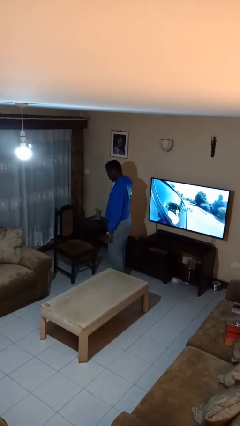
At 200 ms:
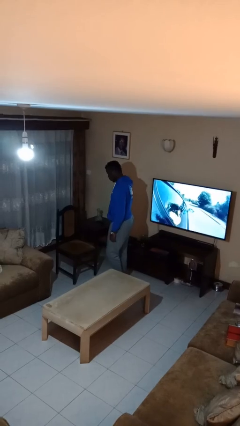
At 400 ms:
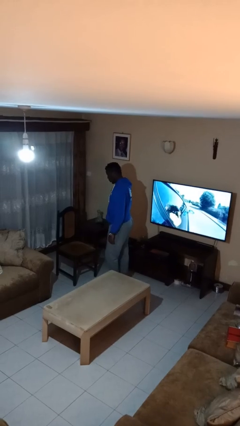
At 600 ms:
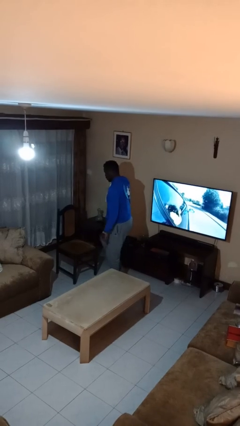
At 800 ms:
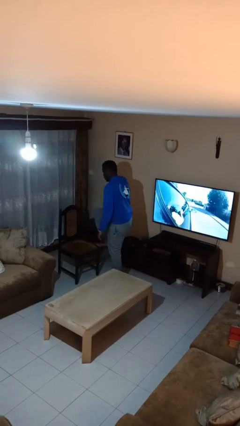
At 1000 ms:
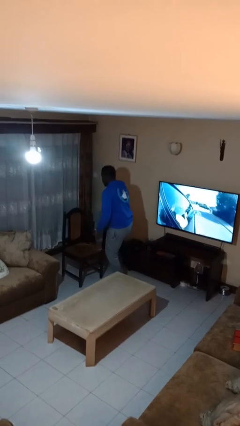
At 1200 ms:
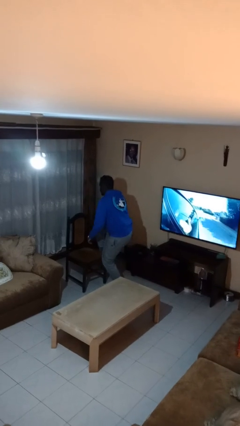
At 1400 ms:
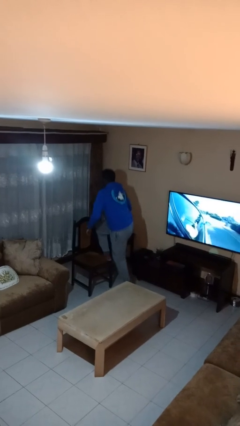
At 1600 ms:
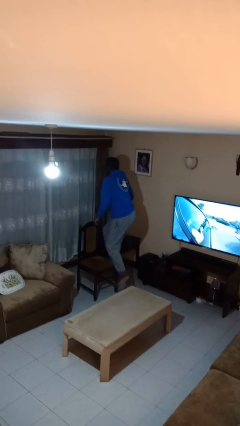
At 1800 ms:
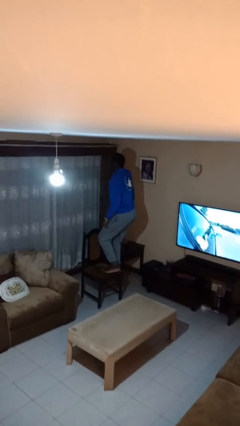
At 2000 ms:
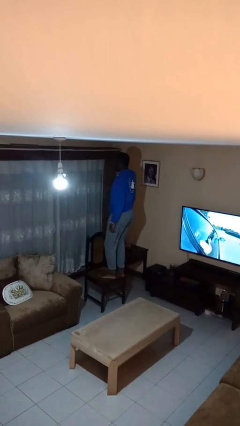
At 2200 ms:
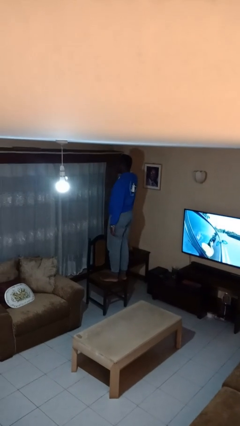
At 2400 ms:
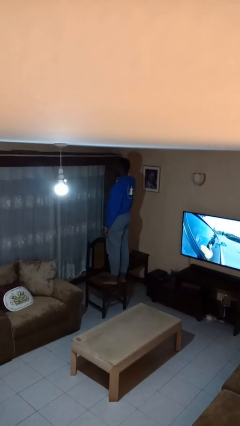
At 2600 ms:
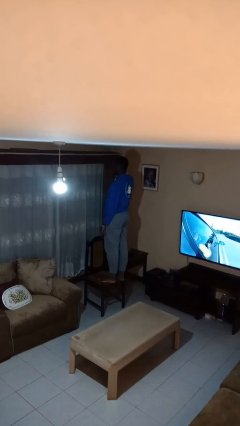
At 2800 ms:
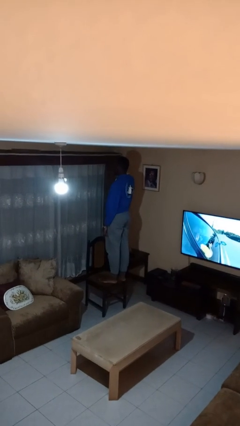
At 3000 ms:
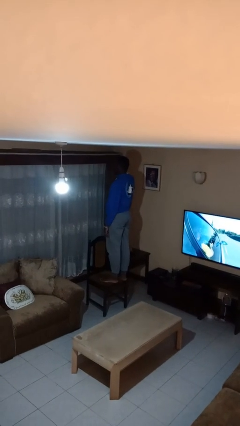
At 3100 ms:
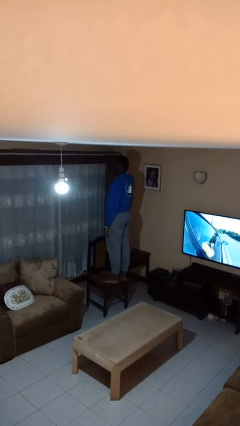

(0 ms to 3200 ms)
person climbs on chair

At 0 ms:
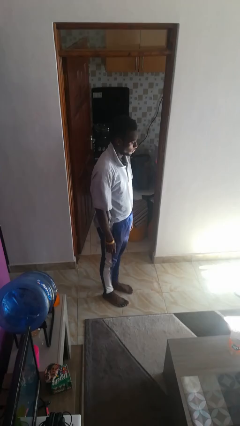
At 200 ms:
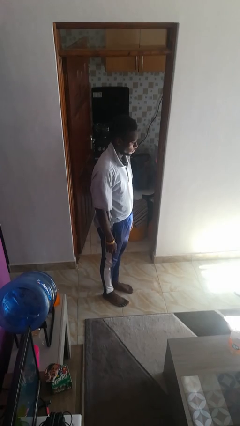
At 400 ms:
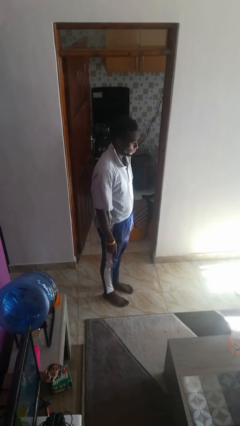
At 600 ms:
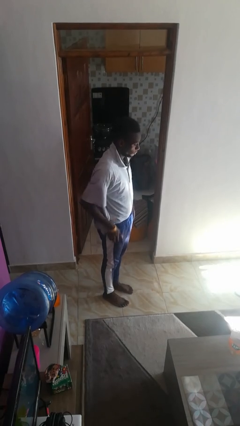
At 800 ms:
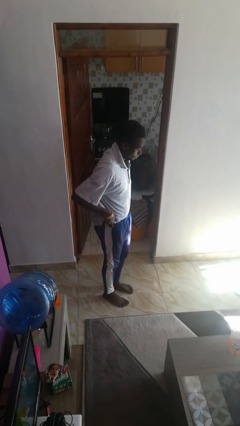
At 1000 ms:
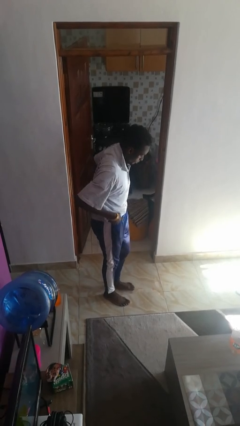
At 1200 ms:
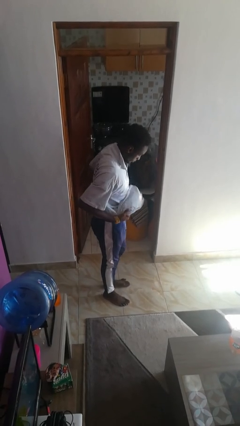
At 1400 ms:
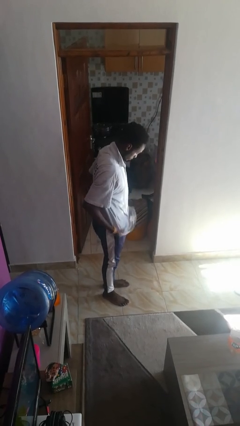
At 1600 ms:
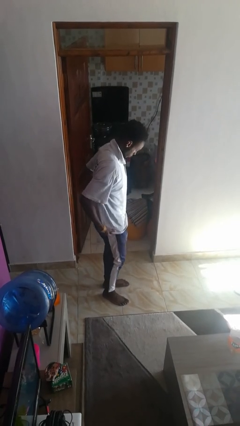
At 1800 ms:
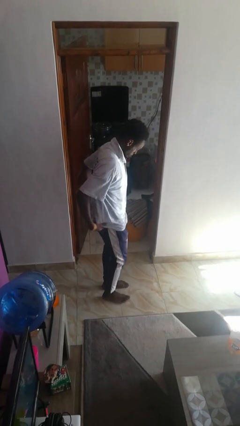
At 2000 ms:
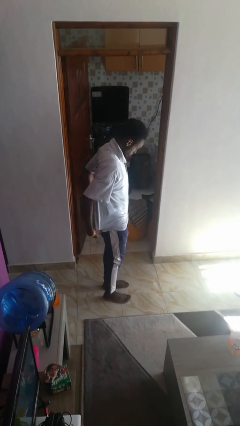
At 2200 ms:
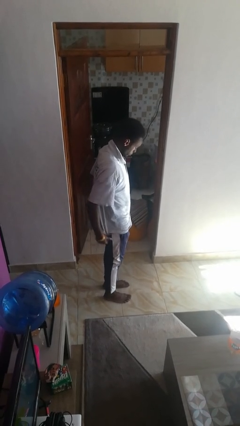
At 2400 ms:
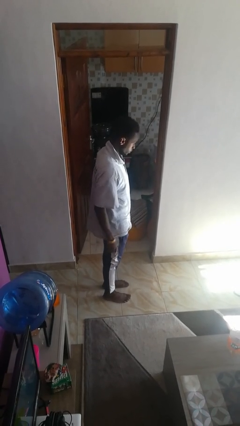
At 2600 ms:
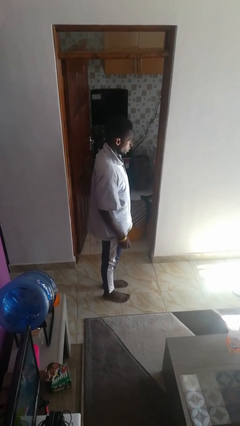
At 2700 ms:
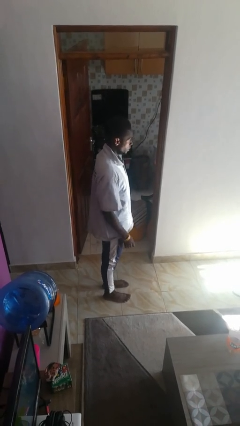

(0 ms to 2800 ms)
person untucks shirt

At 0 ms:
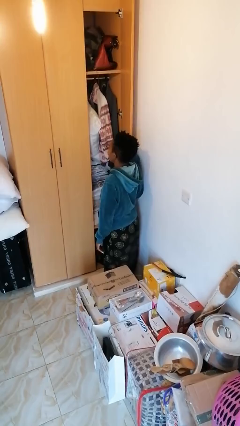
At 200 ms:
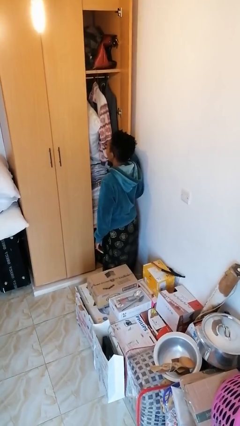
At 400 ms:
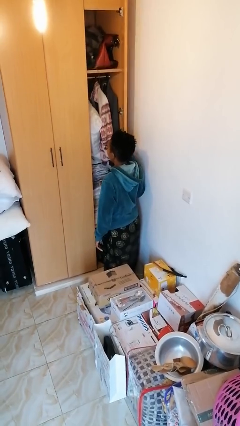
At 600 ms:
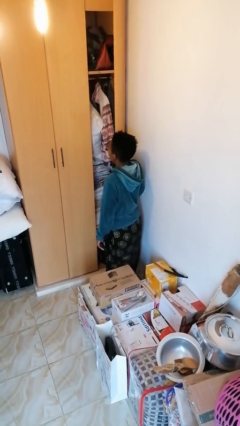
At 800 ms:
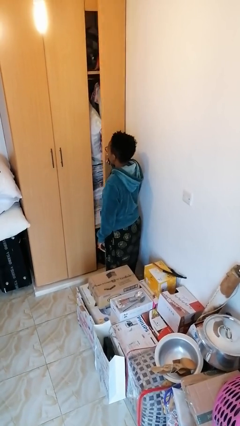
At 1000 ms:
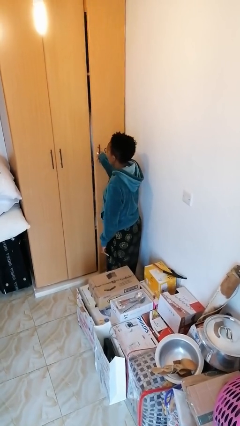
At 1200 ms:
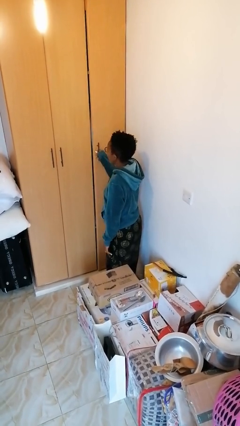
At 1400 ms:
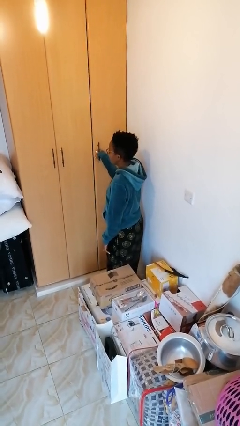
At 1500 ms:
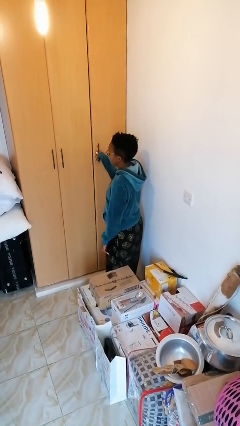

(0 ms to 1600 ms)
person closes closet door

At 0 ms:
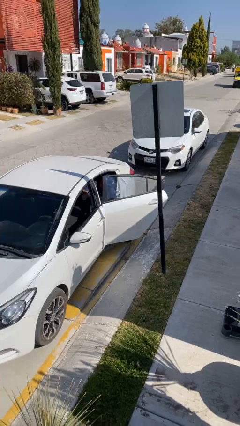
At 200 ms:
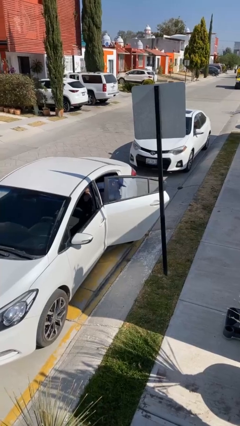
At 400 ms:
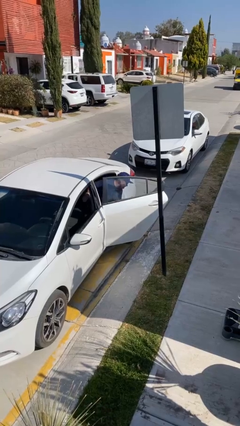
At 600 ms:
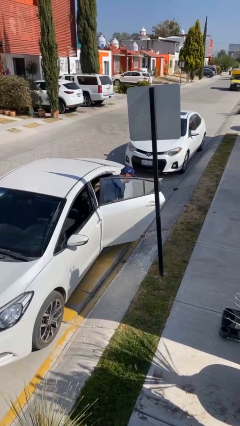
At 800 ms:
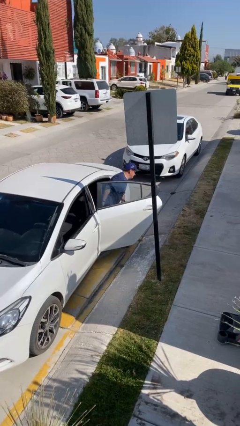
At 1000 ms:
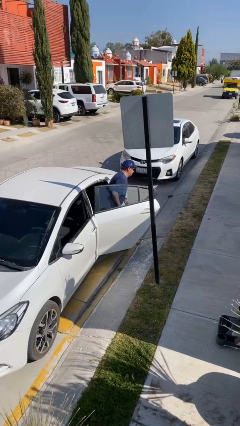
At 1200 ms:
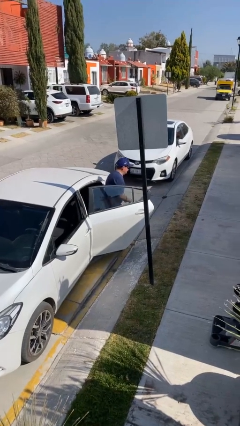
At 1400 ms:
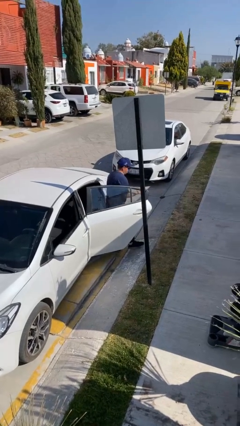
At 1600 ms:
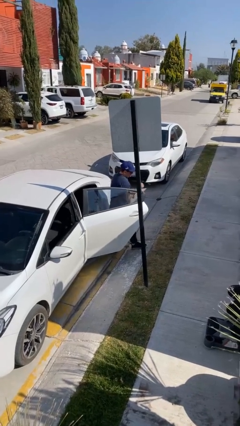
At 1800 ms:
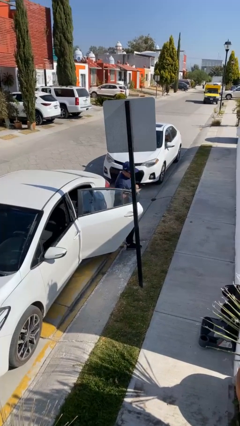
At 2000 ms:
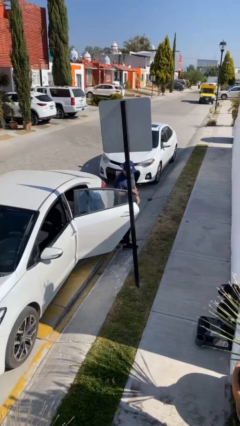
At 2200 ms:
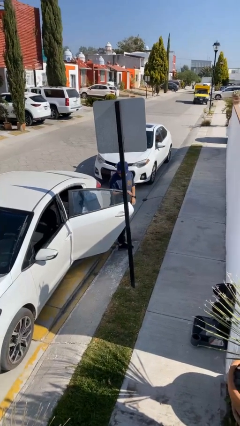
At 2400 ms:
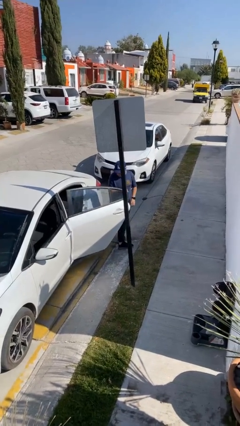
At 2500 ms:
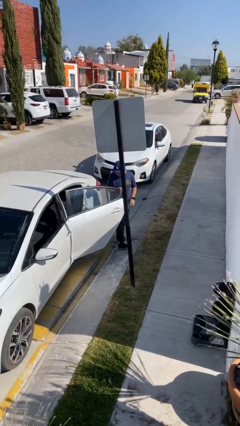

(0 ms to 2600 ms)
person exits car

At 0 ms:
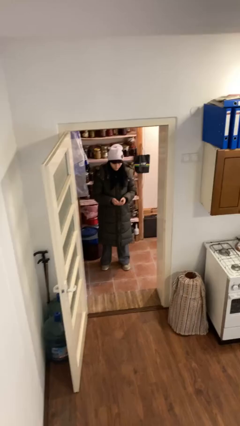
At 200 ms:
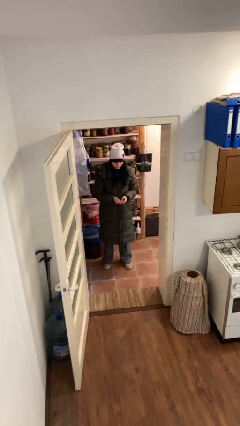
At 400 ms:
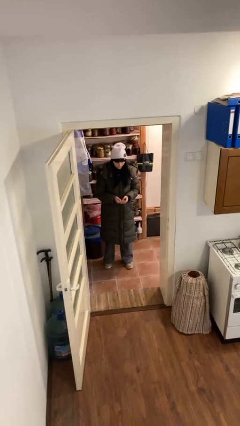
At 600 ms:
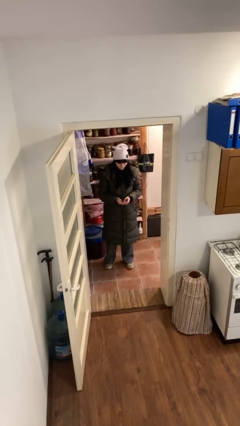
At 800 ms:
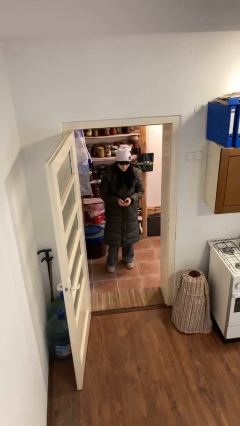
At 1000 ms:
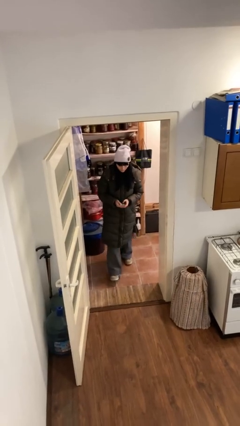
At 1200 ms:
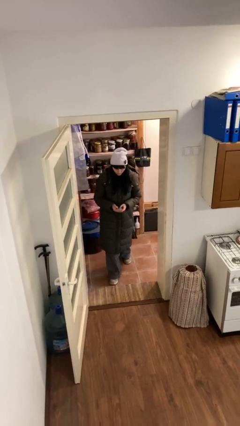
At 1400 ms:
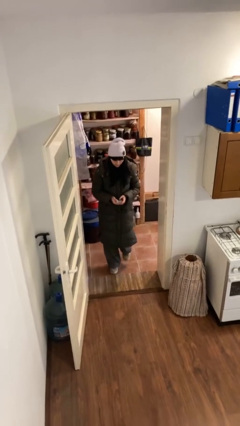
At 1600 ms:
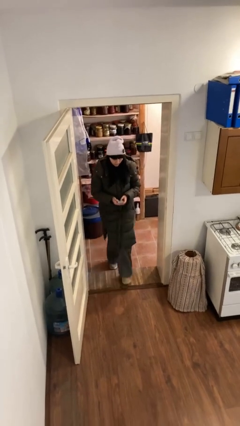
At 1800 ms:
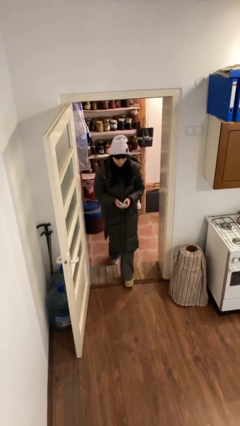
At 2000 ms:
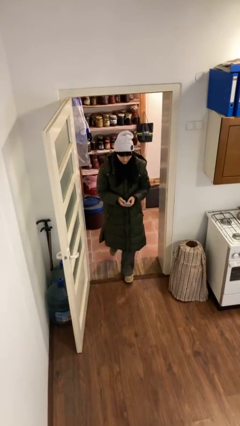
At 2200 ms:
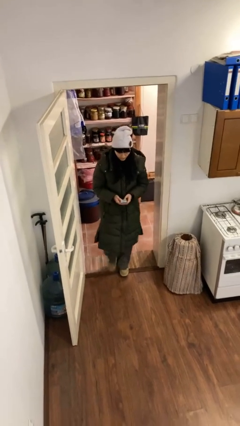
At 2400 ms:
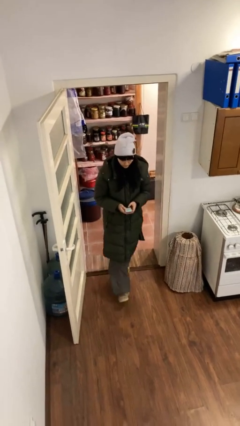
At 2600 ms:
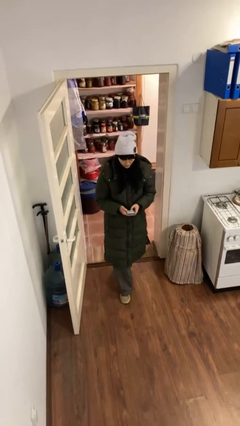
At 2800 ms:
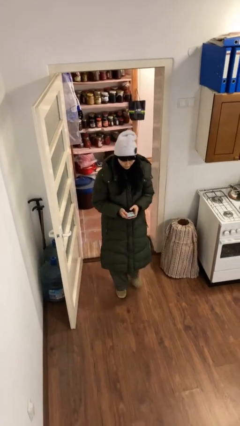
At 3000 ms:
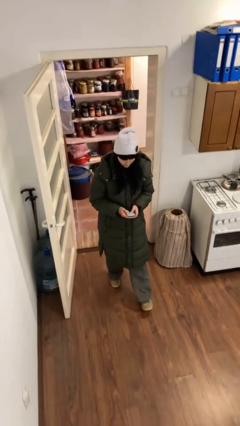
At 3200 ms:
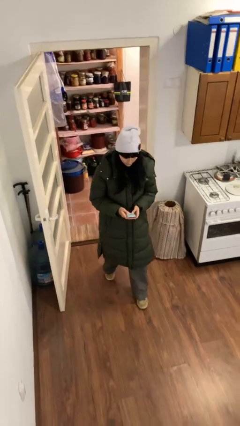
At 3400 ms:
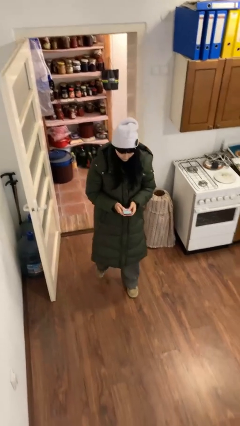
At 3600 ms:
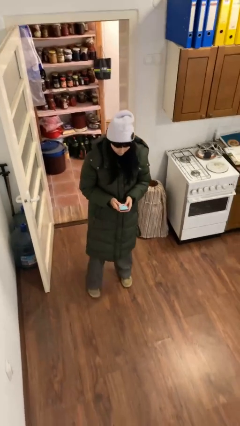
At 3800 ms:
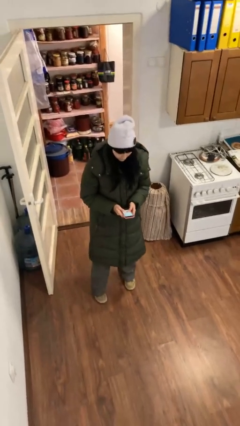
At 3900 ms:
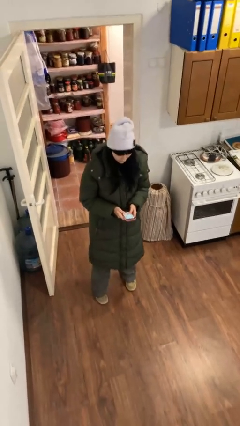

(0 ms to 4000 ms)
person enters scene through structure

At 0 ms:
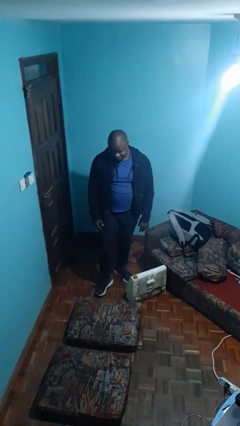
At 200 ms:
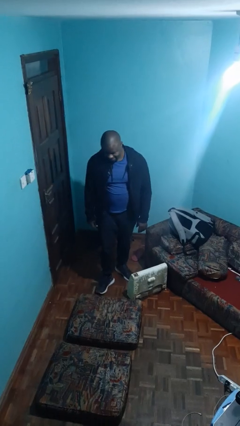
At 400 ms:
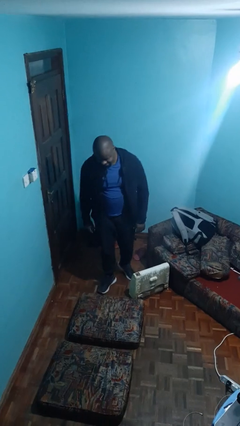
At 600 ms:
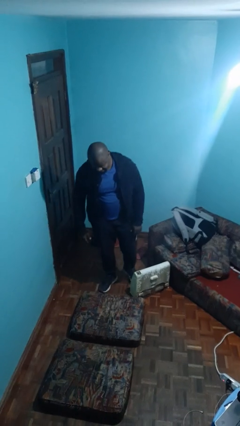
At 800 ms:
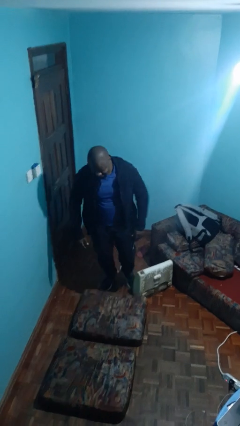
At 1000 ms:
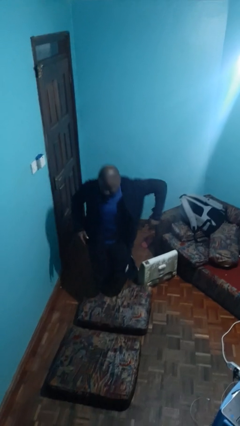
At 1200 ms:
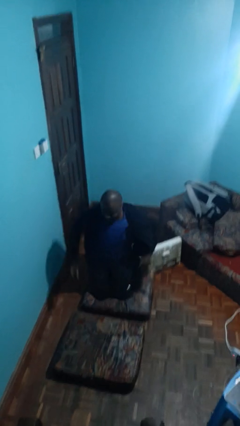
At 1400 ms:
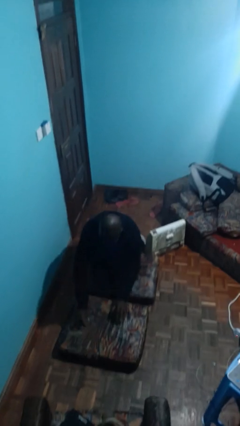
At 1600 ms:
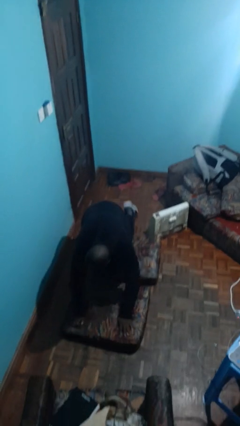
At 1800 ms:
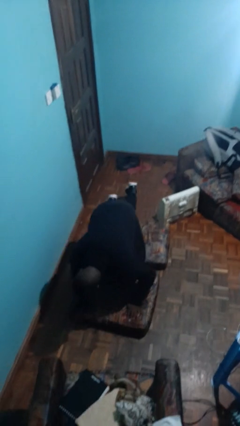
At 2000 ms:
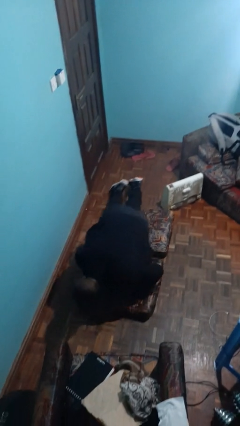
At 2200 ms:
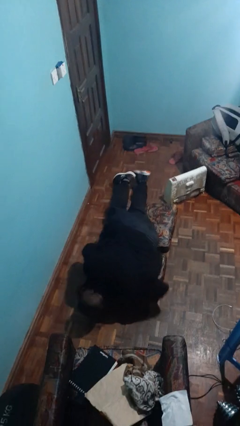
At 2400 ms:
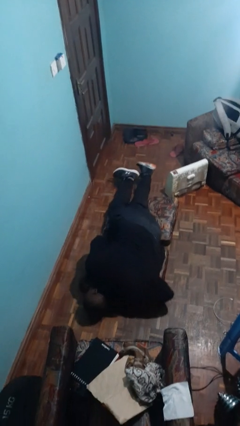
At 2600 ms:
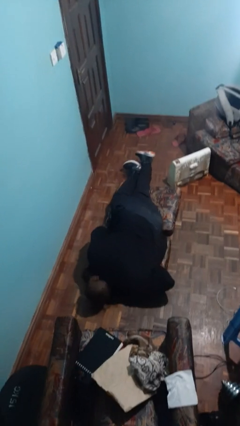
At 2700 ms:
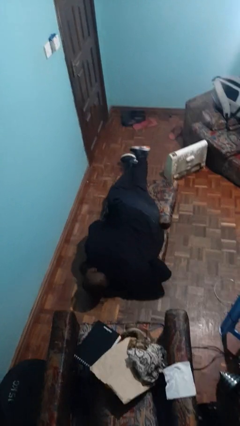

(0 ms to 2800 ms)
person trips on object on floor

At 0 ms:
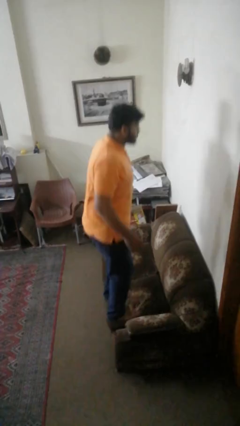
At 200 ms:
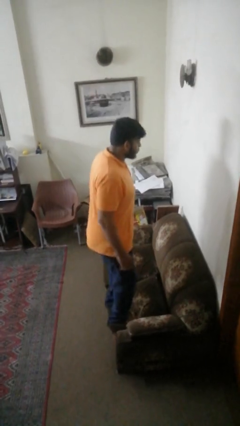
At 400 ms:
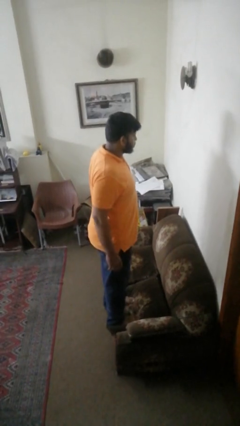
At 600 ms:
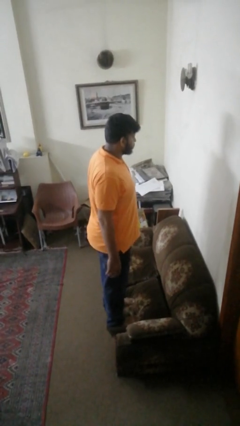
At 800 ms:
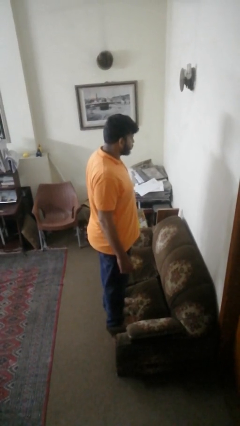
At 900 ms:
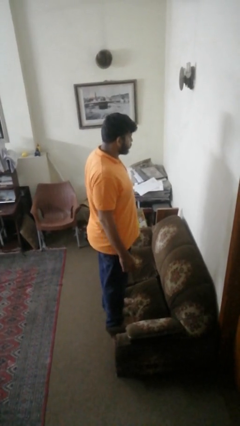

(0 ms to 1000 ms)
person jumps on couch
